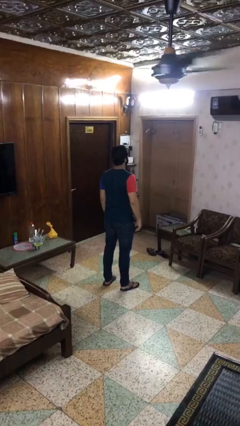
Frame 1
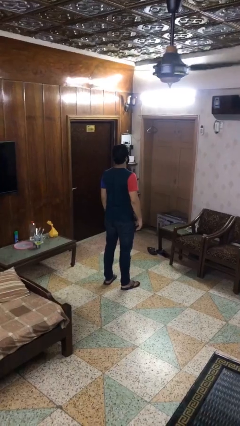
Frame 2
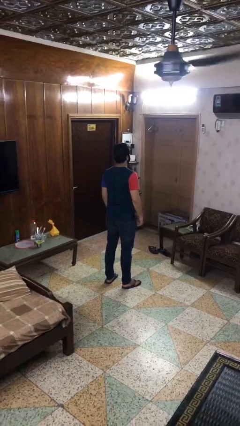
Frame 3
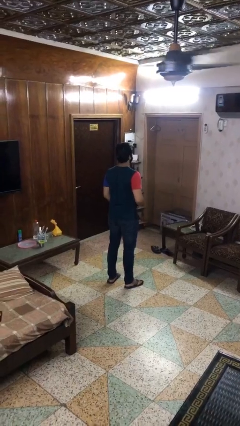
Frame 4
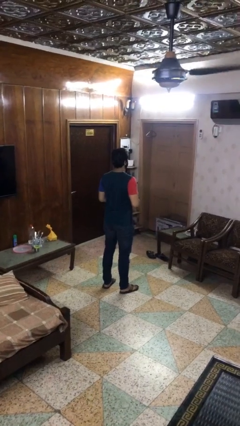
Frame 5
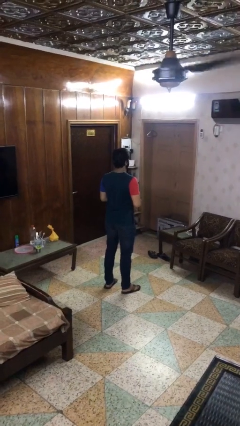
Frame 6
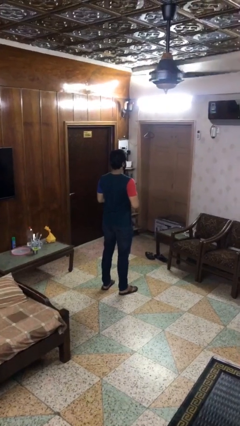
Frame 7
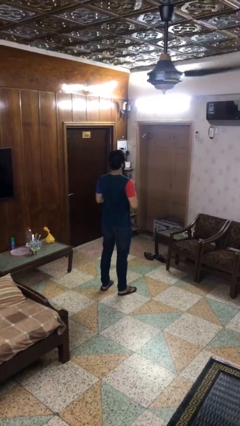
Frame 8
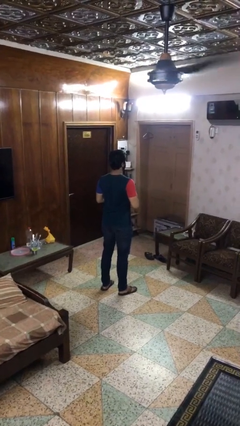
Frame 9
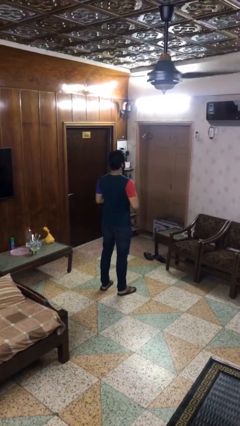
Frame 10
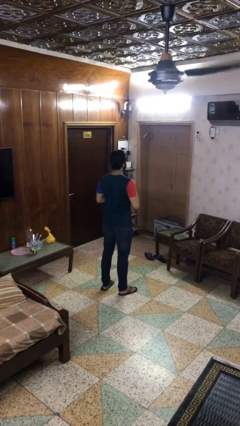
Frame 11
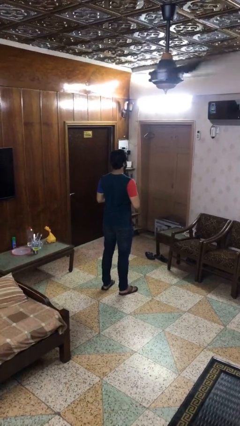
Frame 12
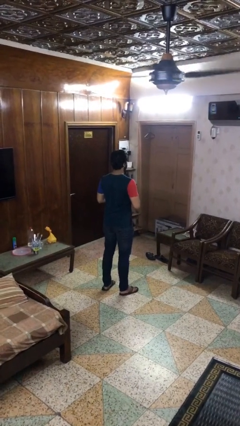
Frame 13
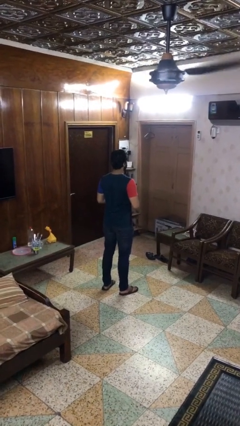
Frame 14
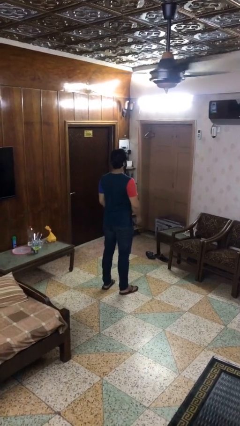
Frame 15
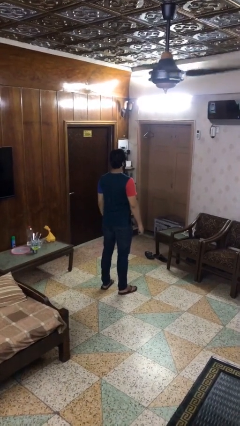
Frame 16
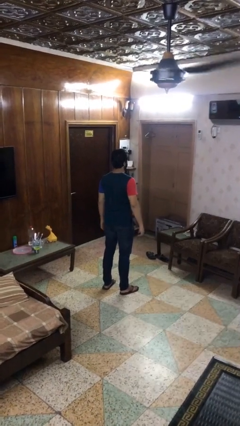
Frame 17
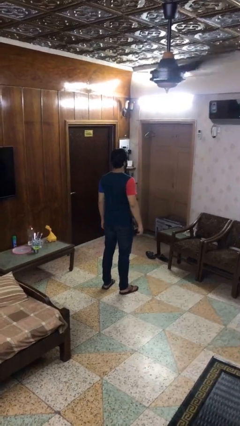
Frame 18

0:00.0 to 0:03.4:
person unbuttons shirt

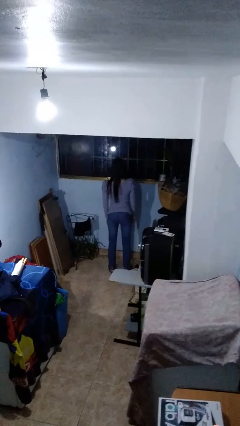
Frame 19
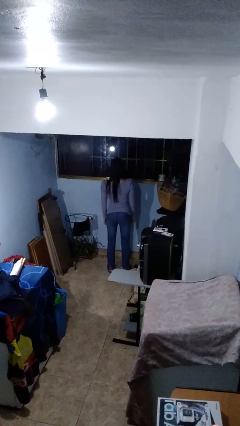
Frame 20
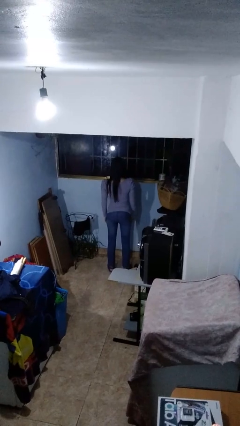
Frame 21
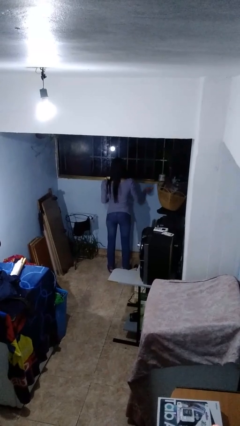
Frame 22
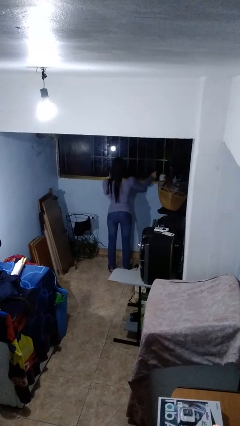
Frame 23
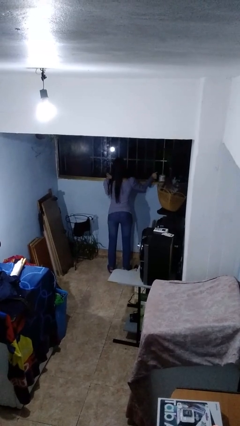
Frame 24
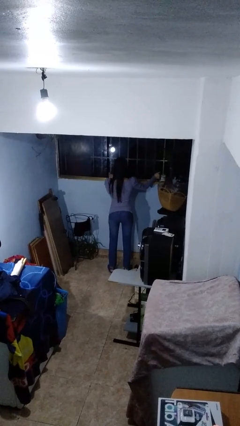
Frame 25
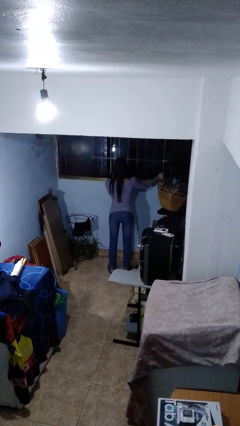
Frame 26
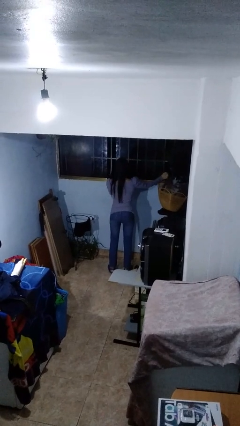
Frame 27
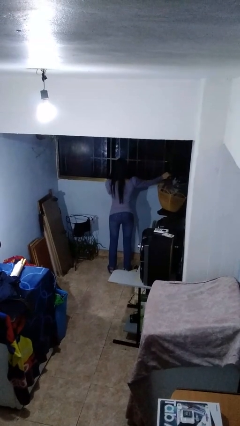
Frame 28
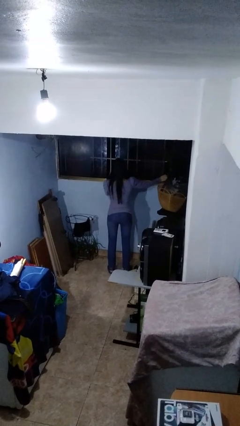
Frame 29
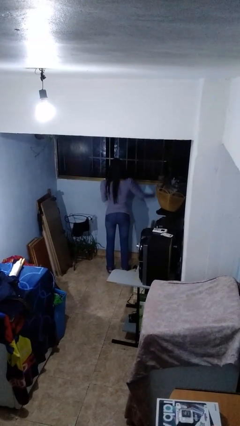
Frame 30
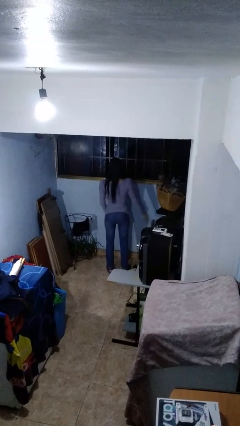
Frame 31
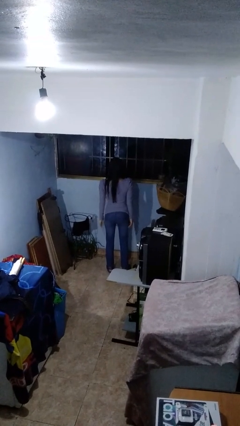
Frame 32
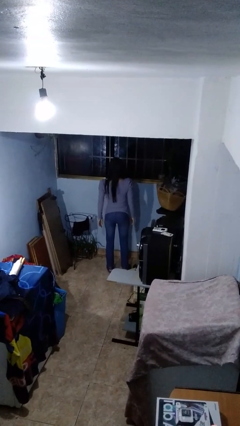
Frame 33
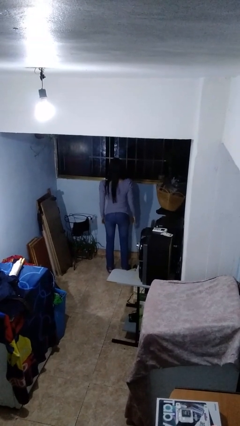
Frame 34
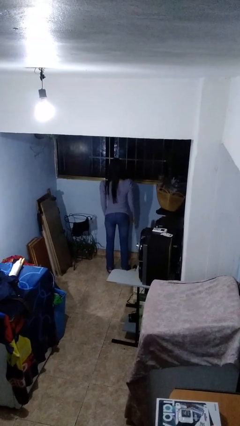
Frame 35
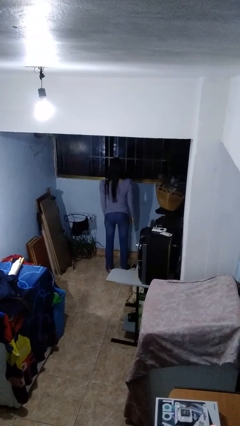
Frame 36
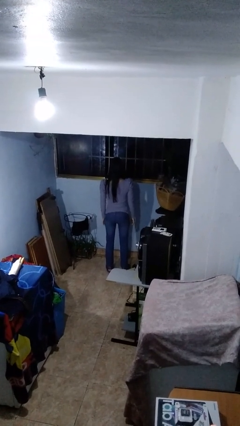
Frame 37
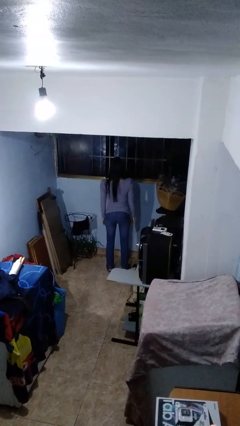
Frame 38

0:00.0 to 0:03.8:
person opens home window

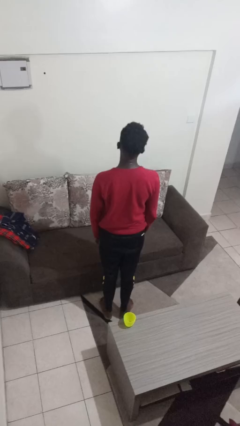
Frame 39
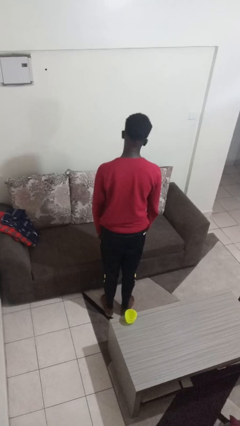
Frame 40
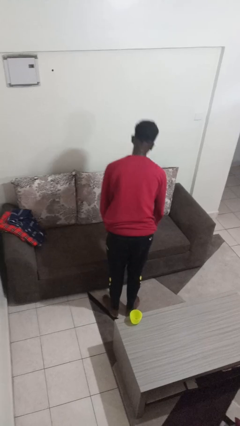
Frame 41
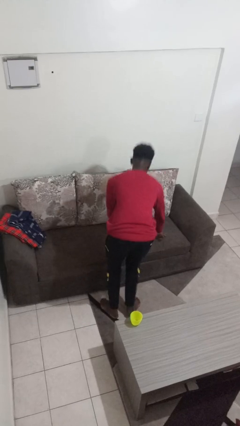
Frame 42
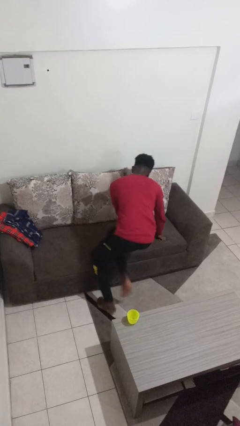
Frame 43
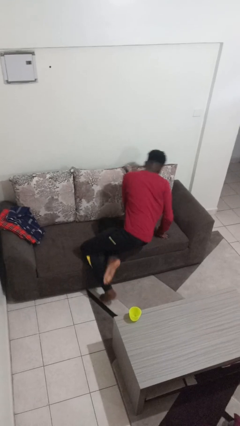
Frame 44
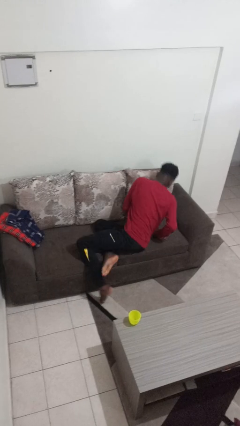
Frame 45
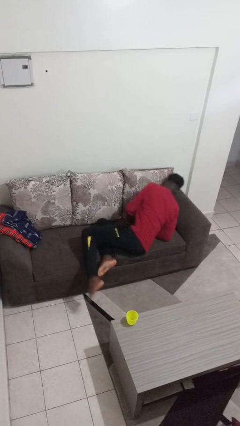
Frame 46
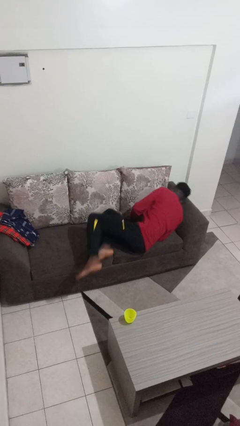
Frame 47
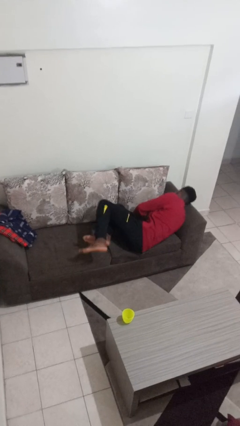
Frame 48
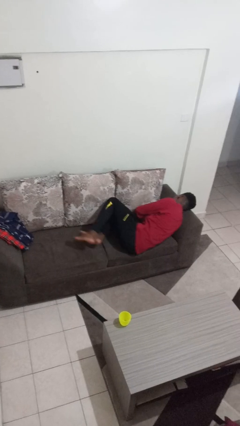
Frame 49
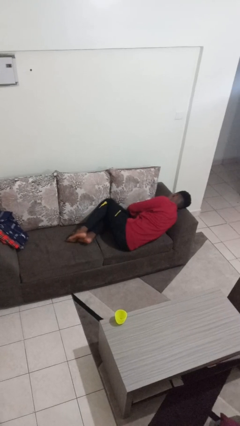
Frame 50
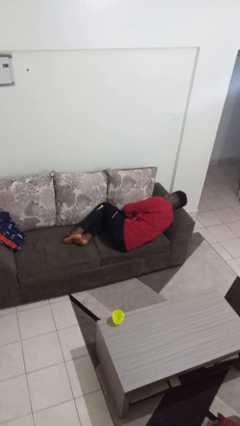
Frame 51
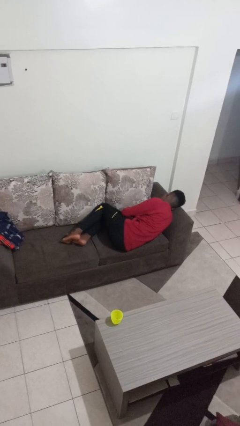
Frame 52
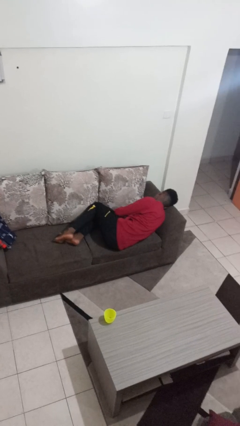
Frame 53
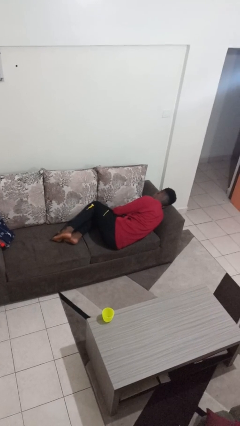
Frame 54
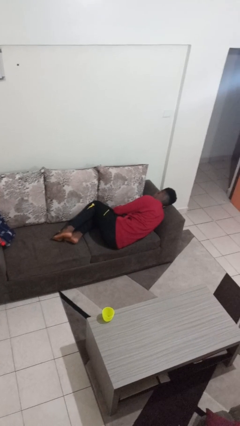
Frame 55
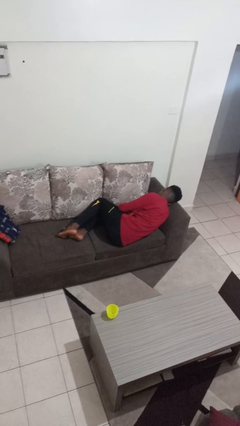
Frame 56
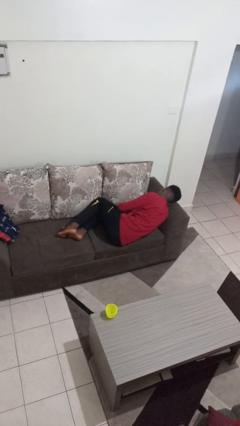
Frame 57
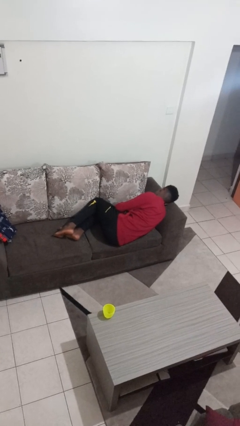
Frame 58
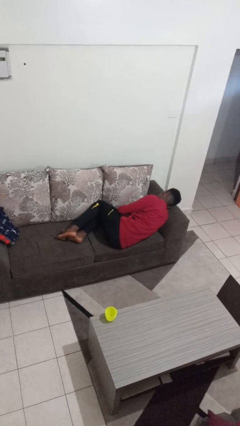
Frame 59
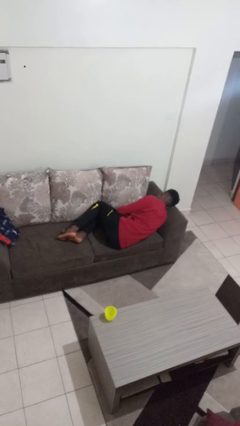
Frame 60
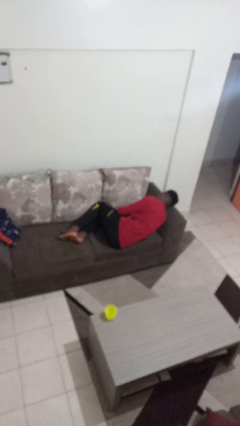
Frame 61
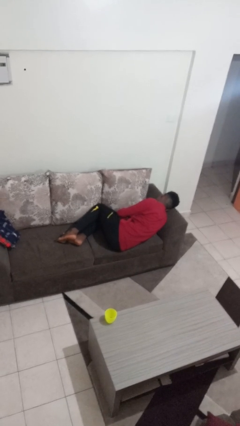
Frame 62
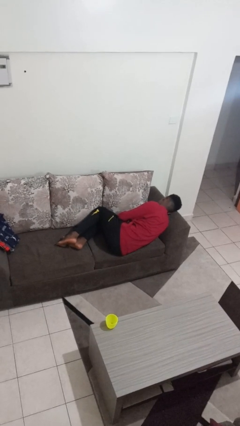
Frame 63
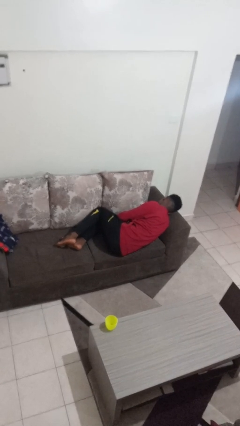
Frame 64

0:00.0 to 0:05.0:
person lies down on couch

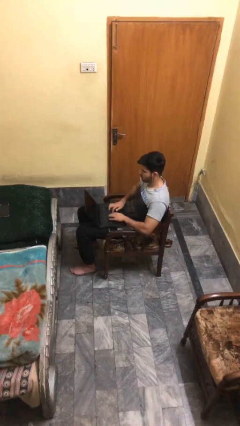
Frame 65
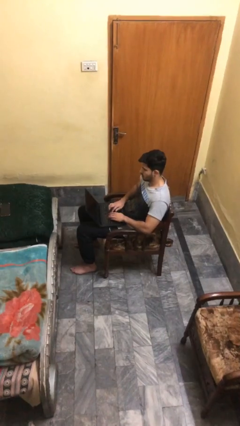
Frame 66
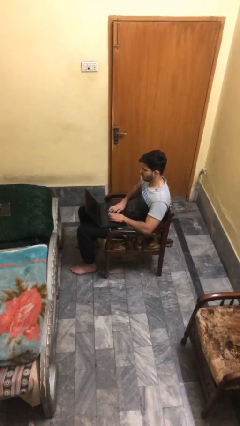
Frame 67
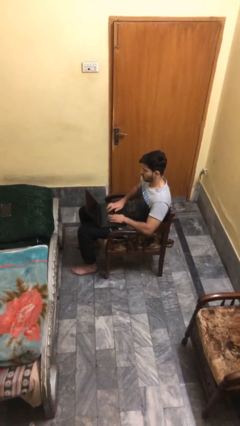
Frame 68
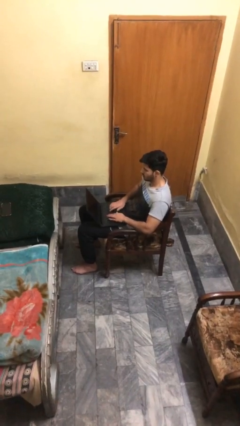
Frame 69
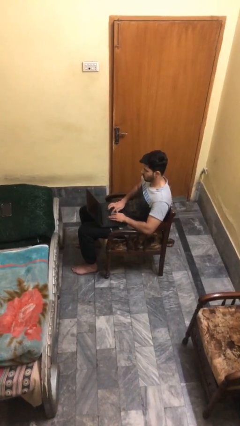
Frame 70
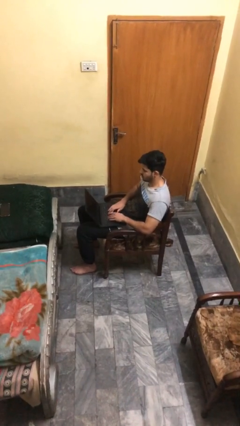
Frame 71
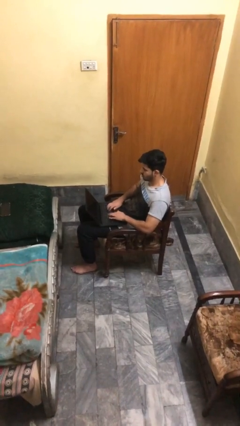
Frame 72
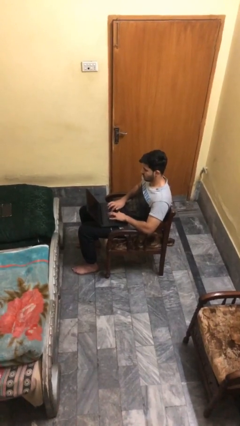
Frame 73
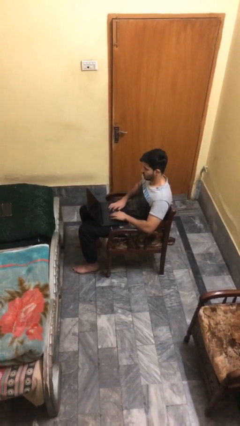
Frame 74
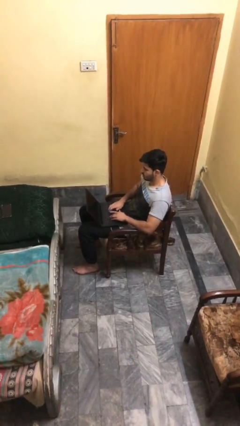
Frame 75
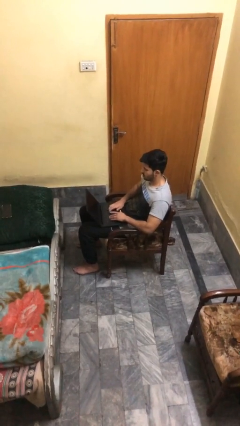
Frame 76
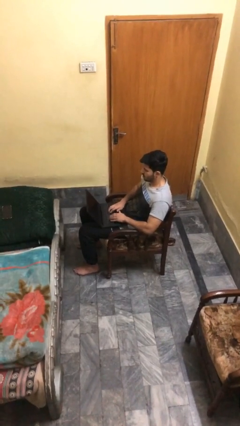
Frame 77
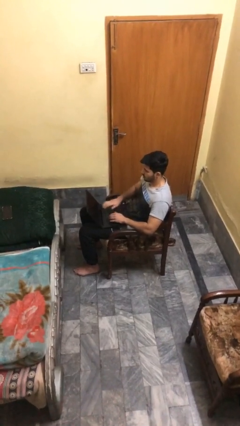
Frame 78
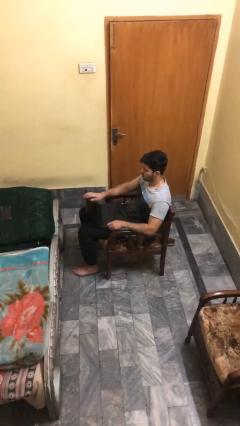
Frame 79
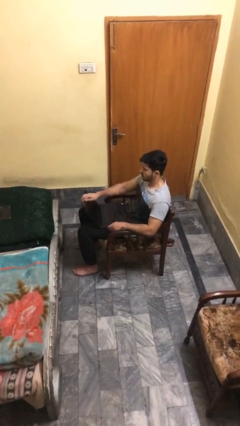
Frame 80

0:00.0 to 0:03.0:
person interacts with laptop

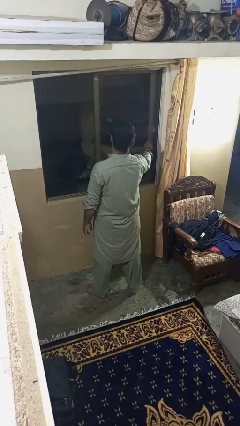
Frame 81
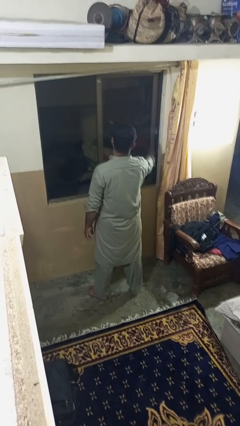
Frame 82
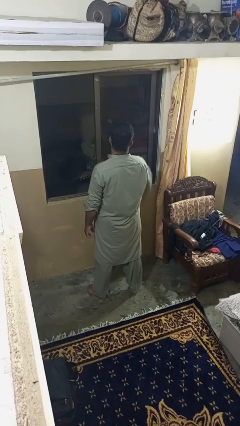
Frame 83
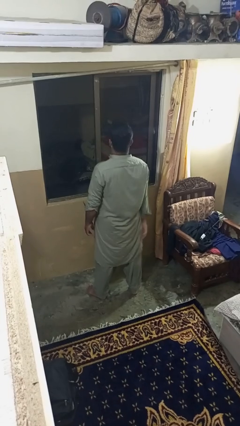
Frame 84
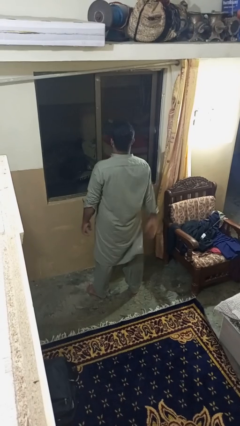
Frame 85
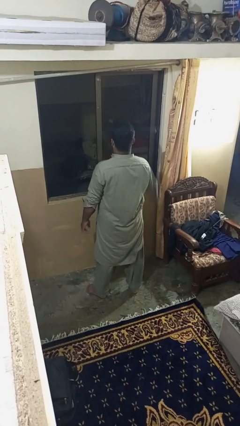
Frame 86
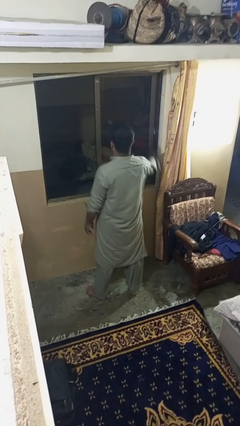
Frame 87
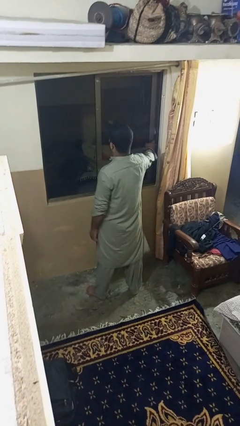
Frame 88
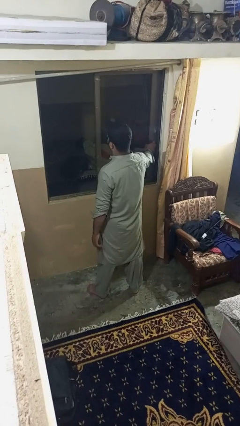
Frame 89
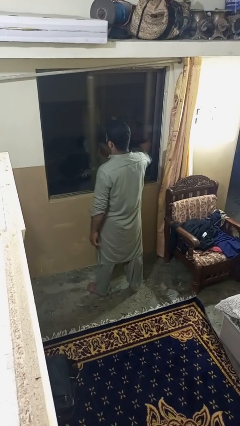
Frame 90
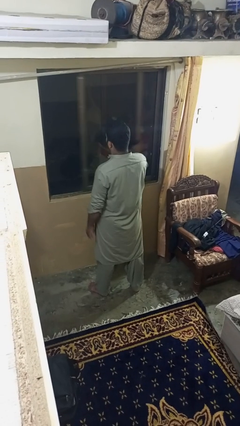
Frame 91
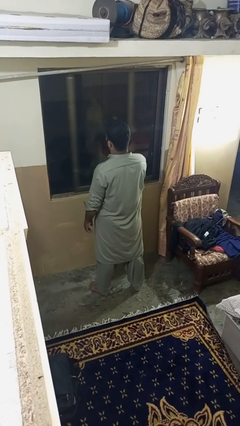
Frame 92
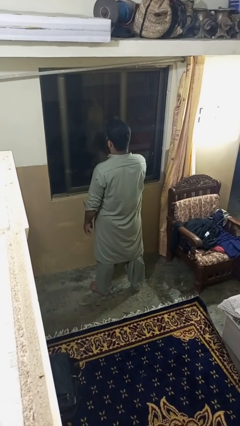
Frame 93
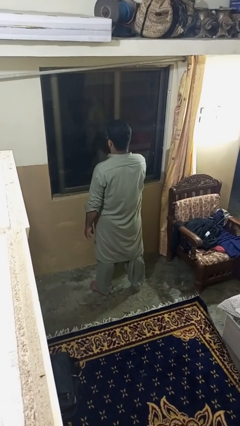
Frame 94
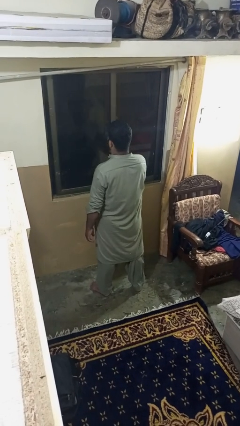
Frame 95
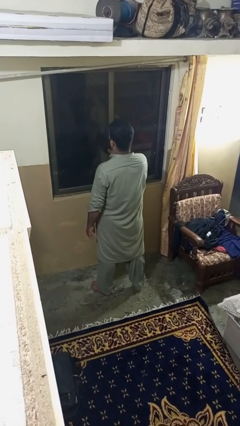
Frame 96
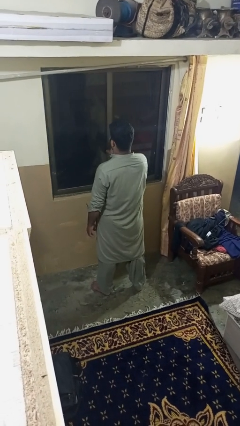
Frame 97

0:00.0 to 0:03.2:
person closes home window
